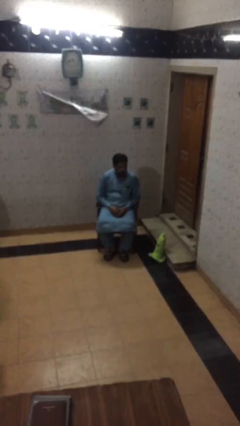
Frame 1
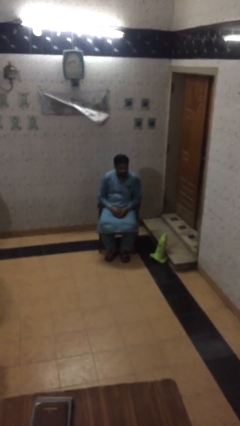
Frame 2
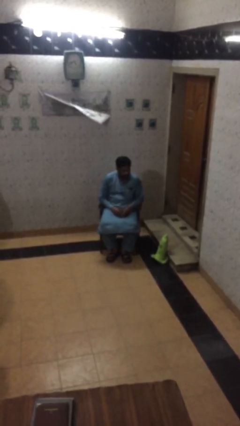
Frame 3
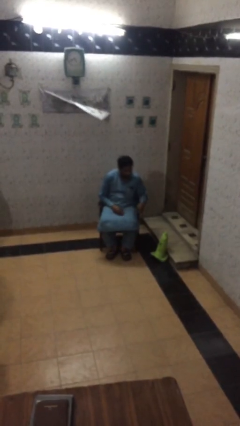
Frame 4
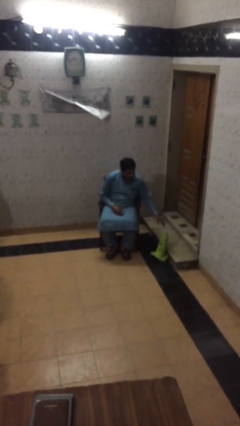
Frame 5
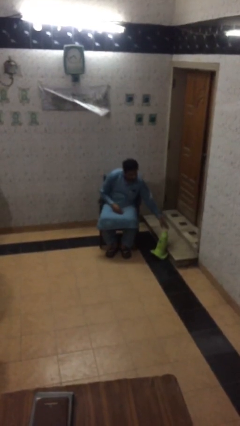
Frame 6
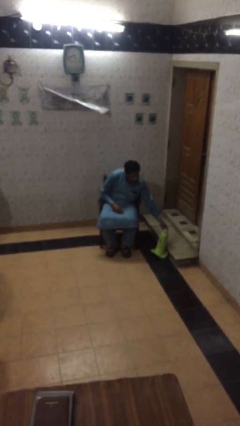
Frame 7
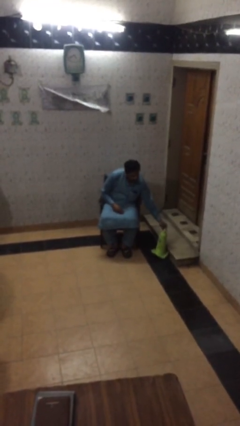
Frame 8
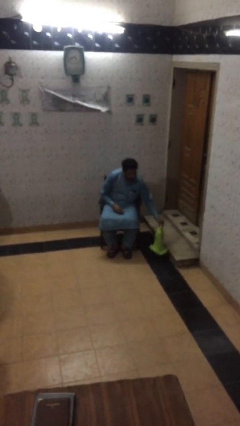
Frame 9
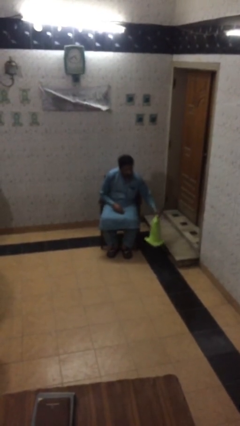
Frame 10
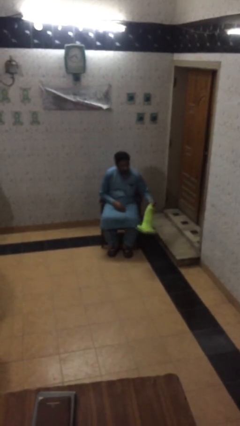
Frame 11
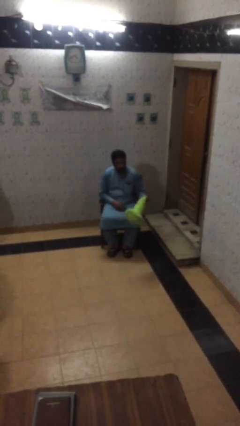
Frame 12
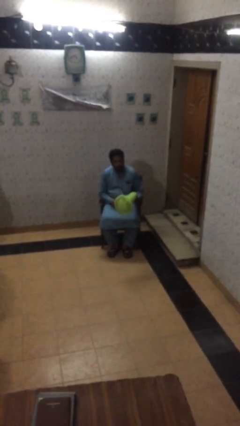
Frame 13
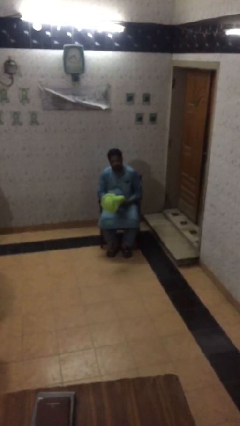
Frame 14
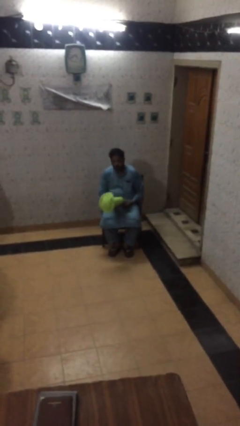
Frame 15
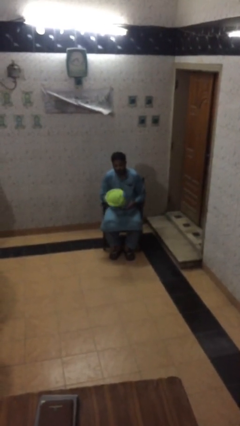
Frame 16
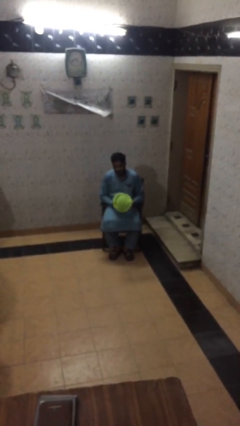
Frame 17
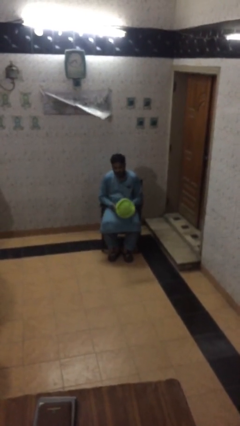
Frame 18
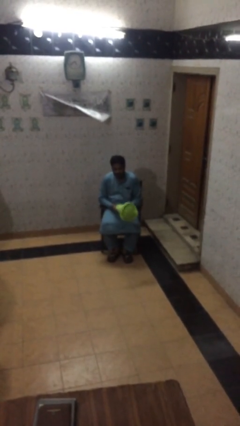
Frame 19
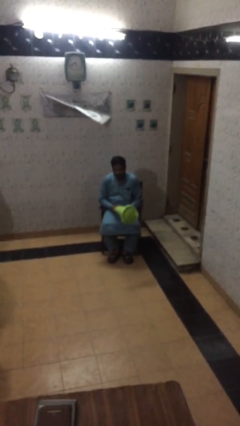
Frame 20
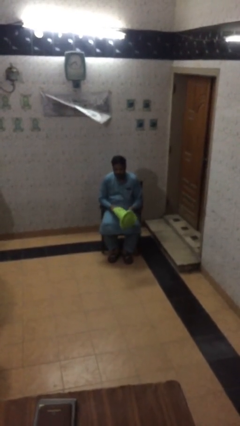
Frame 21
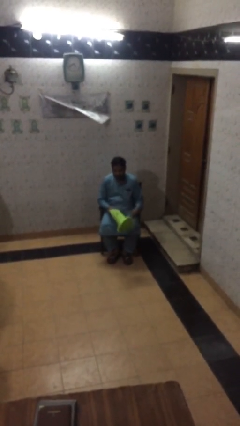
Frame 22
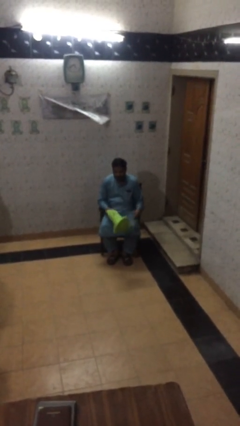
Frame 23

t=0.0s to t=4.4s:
person picks up object from floor

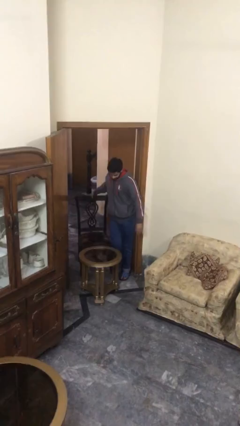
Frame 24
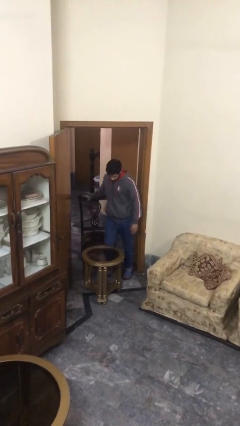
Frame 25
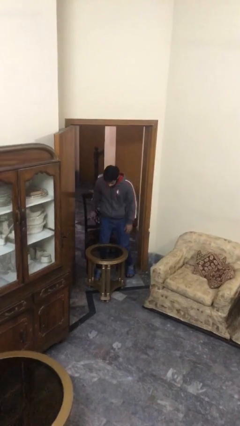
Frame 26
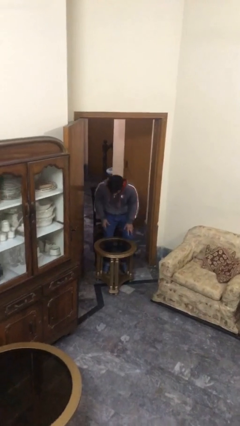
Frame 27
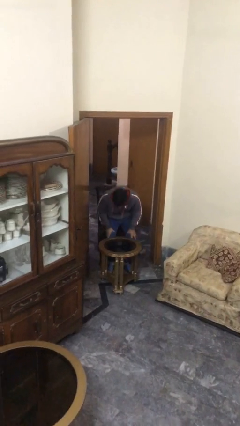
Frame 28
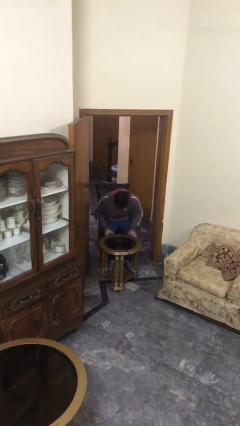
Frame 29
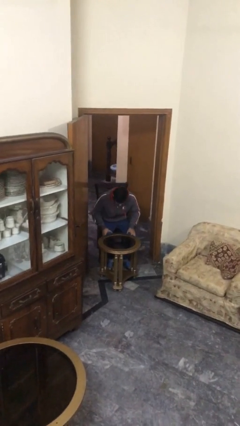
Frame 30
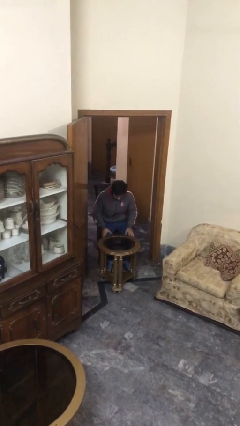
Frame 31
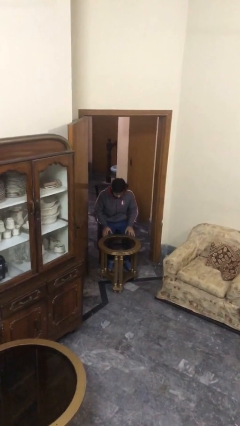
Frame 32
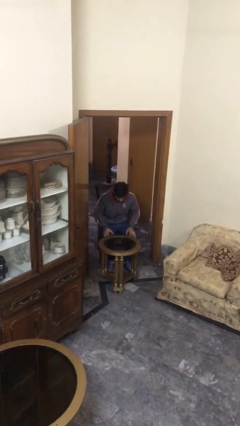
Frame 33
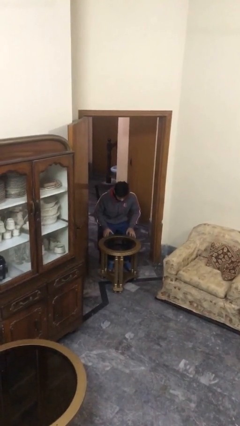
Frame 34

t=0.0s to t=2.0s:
person sits down

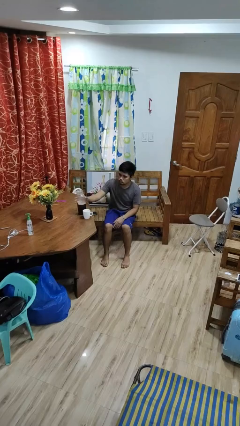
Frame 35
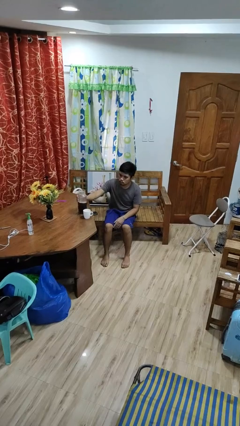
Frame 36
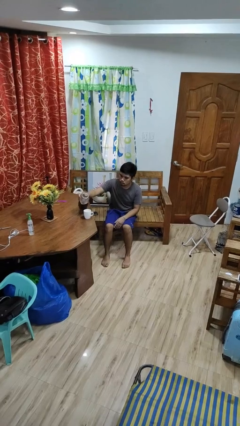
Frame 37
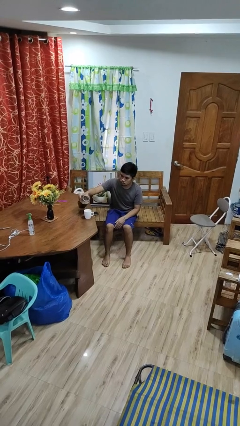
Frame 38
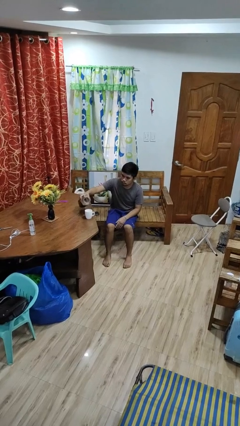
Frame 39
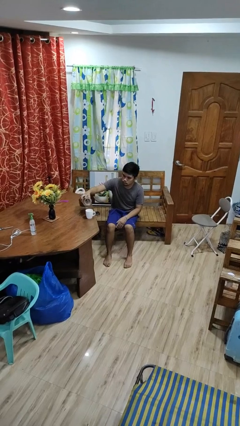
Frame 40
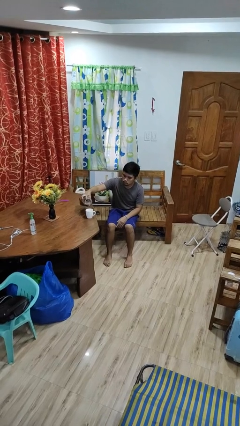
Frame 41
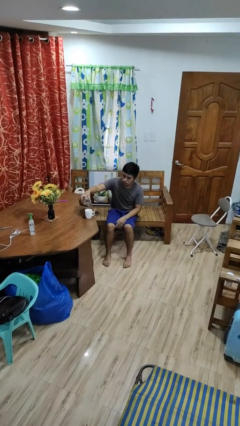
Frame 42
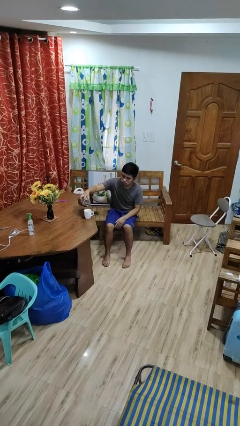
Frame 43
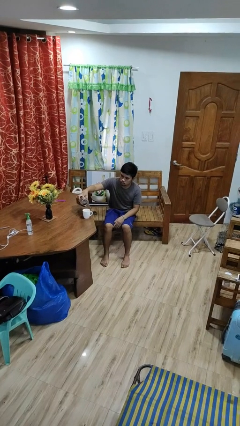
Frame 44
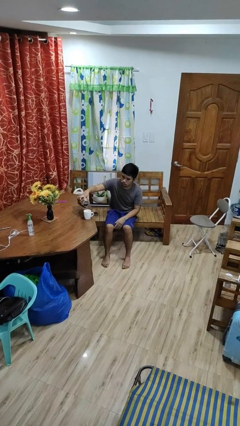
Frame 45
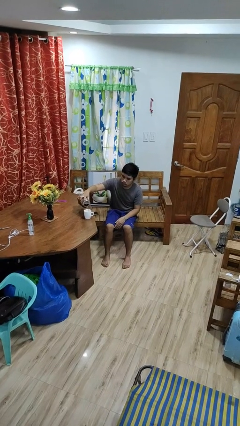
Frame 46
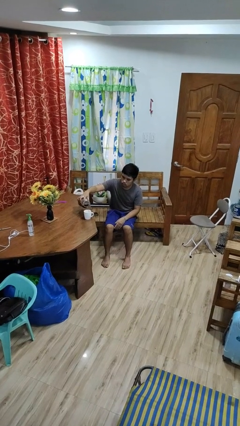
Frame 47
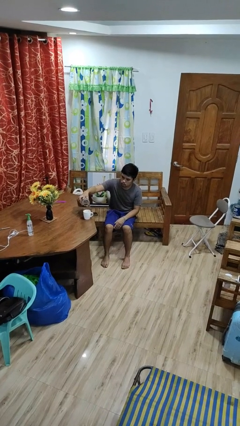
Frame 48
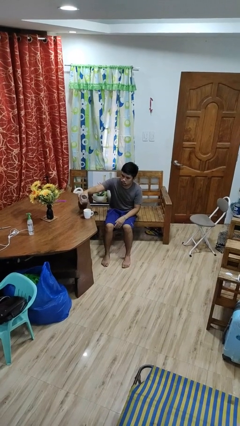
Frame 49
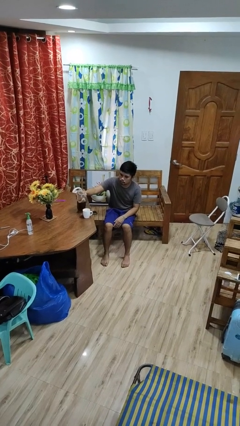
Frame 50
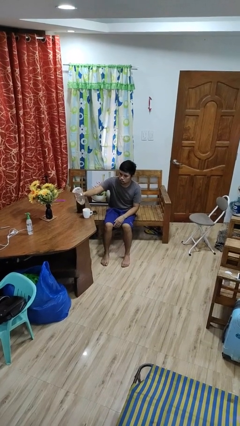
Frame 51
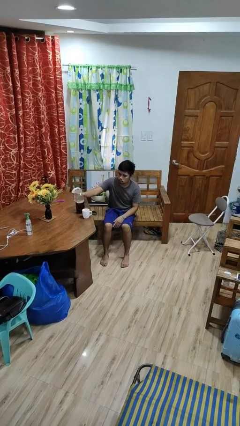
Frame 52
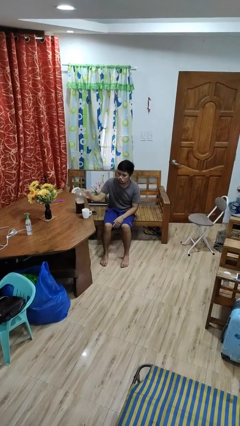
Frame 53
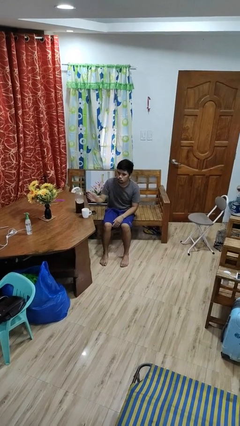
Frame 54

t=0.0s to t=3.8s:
person pours coffee into mug

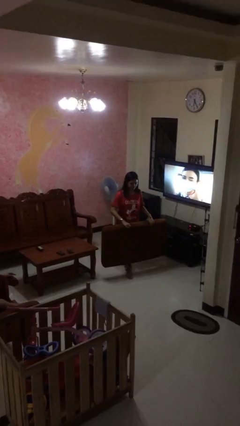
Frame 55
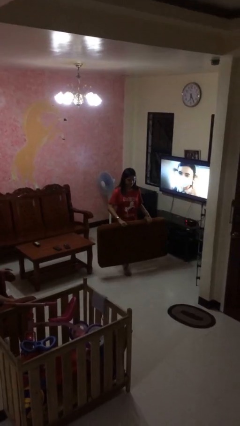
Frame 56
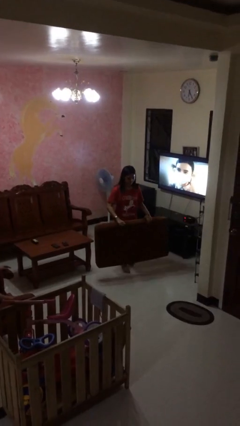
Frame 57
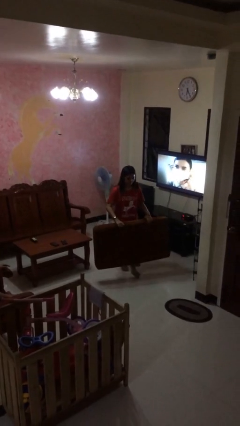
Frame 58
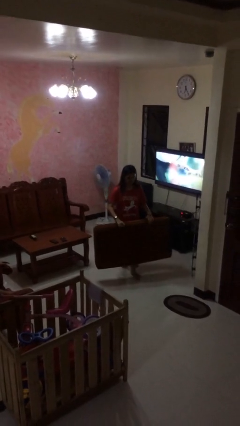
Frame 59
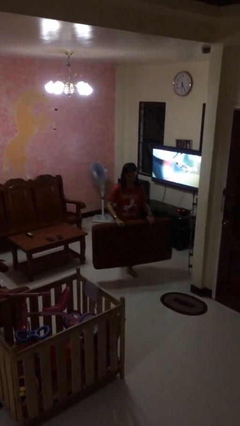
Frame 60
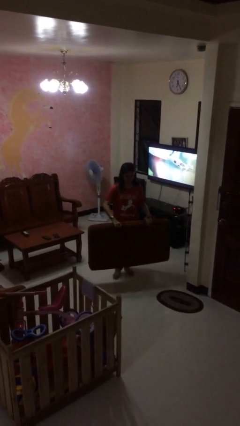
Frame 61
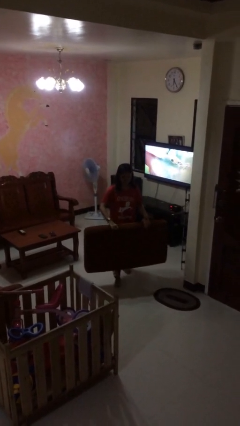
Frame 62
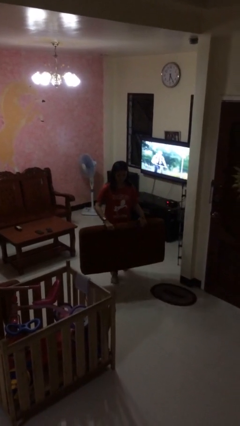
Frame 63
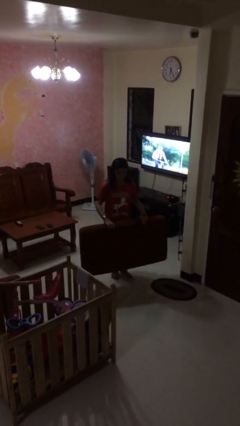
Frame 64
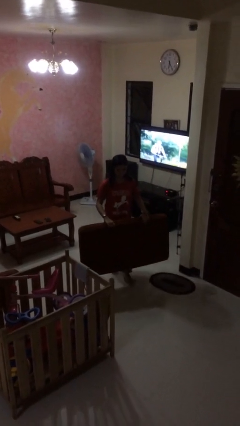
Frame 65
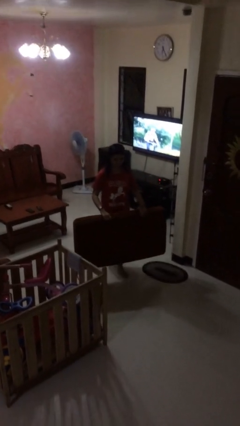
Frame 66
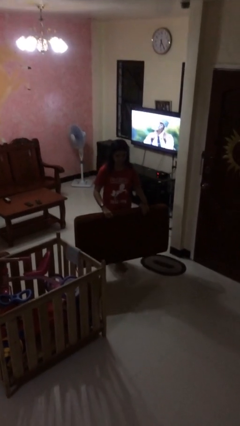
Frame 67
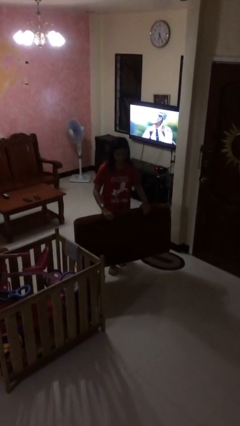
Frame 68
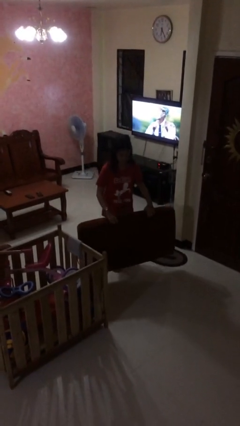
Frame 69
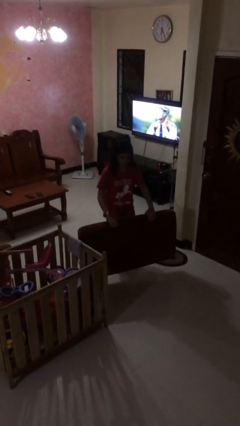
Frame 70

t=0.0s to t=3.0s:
person carries heavy object

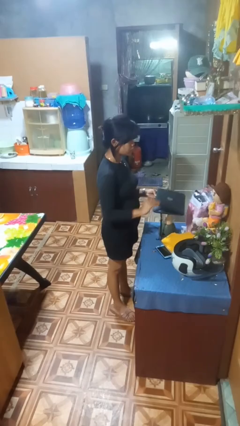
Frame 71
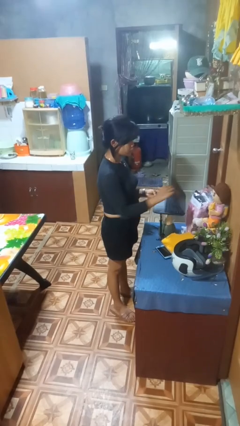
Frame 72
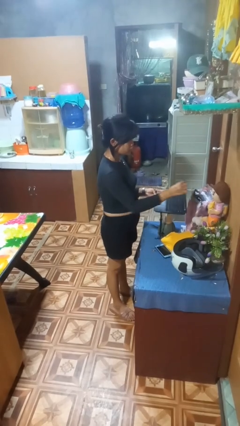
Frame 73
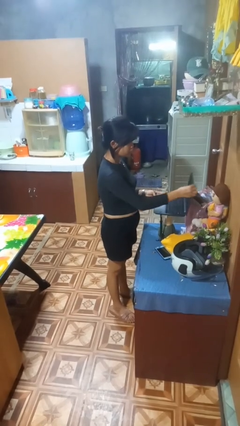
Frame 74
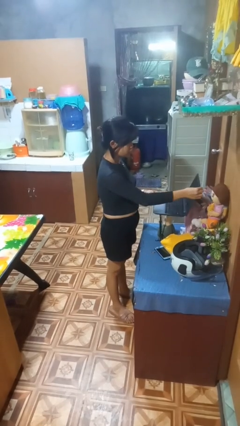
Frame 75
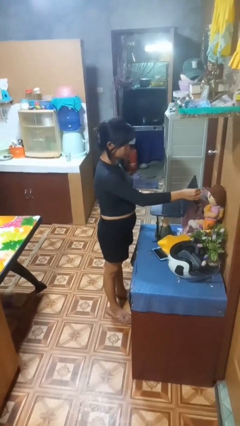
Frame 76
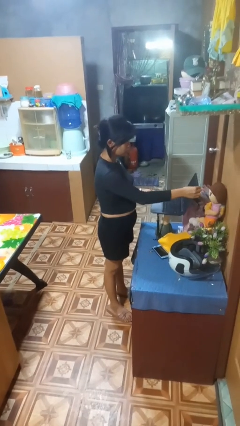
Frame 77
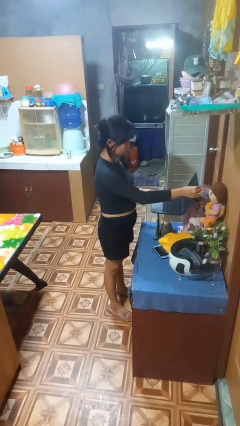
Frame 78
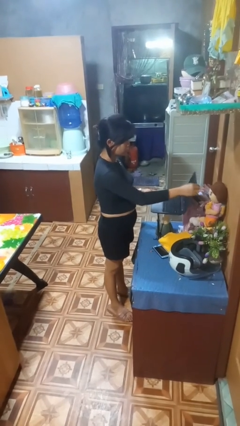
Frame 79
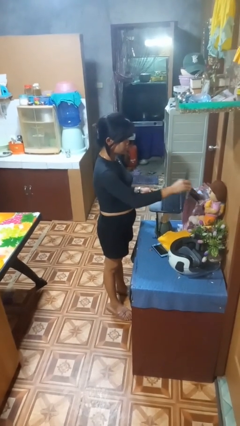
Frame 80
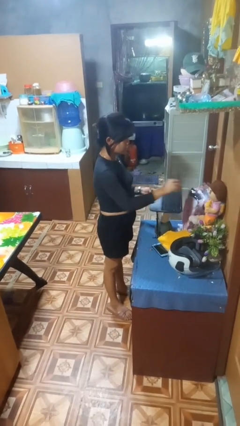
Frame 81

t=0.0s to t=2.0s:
person opens laptop

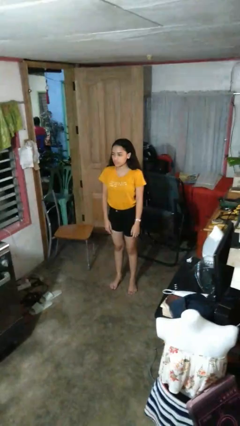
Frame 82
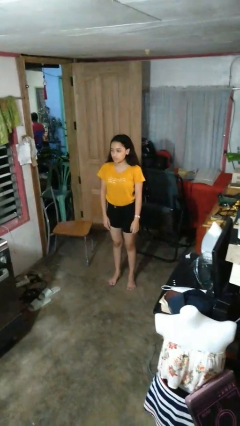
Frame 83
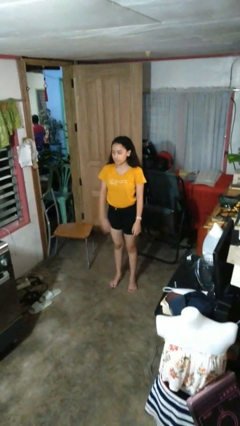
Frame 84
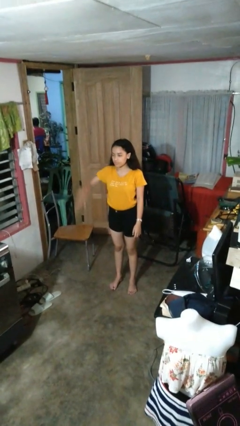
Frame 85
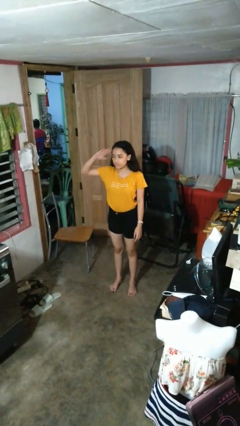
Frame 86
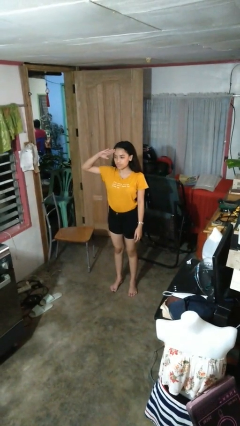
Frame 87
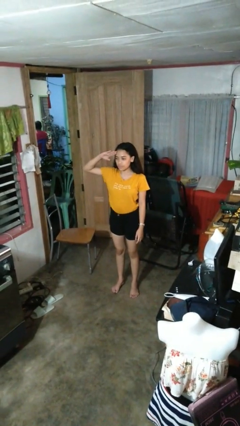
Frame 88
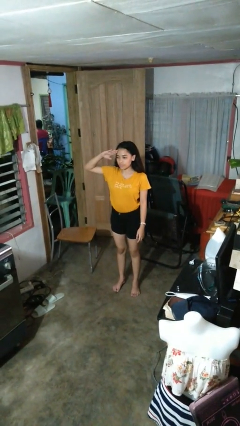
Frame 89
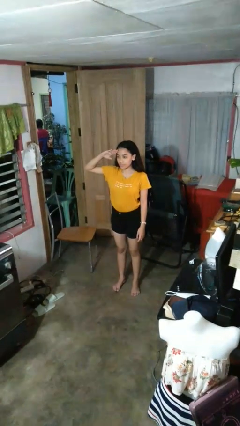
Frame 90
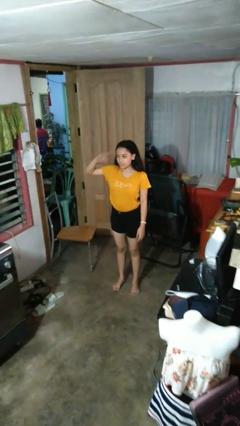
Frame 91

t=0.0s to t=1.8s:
person salutes

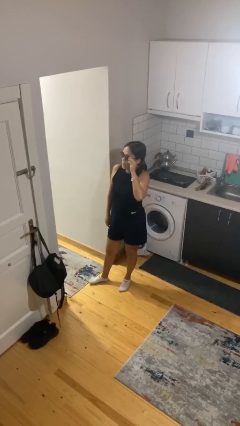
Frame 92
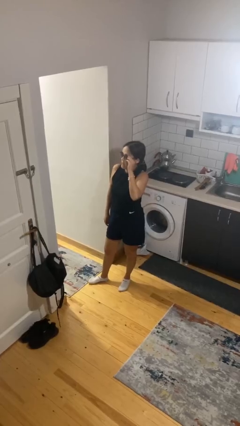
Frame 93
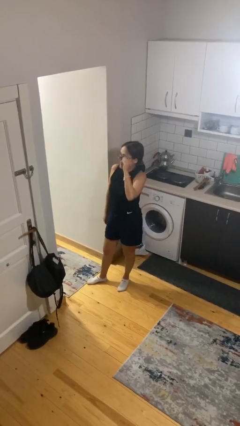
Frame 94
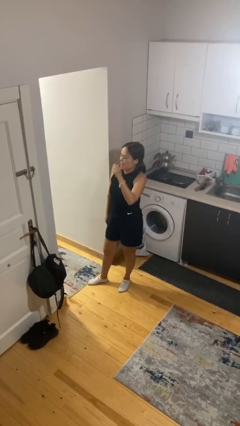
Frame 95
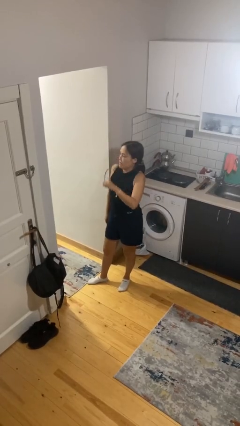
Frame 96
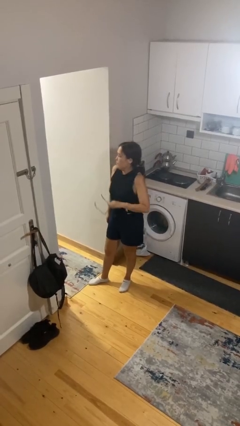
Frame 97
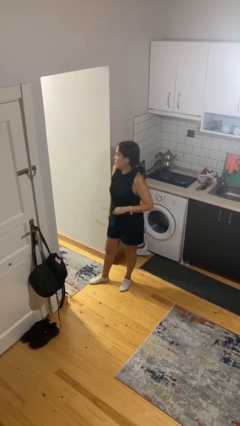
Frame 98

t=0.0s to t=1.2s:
person takes off sunglasses
